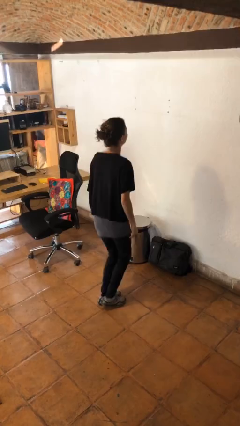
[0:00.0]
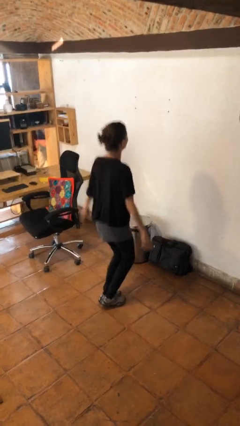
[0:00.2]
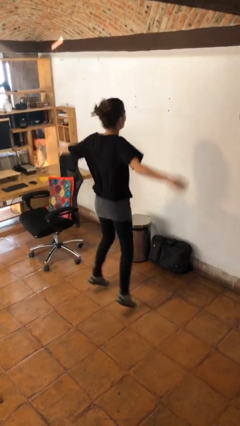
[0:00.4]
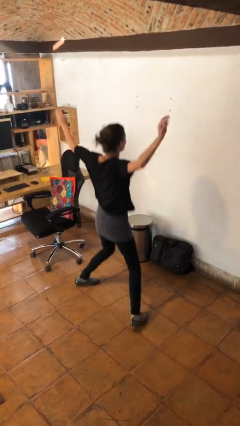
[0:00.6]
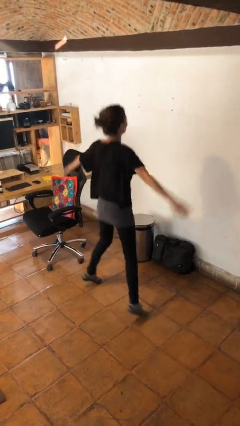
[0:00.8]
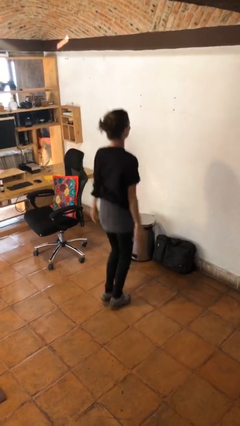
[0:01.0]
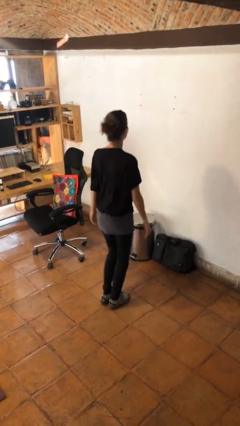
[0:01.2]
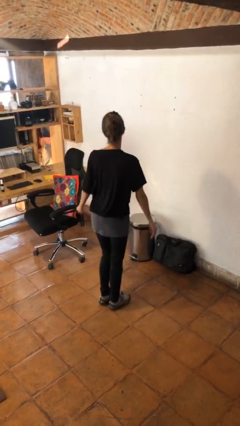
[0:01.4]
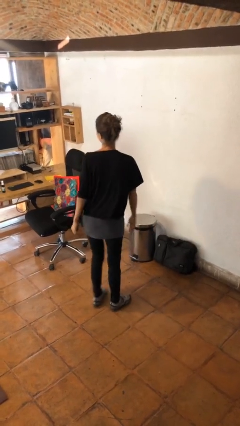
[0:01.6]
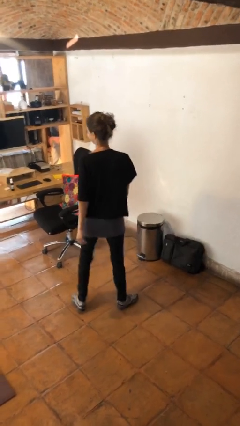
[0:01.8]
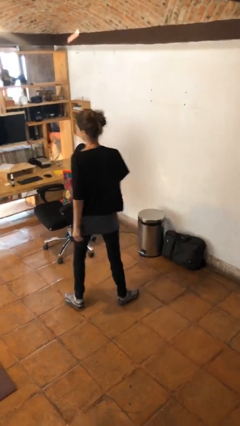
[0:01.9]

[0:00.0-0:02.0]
person exercises with jumping jacks

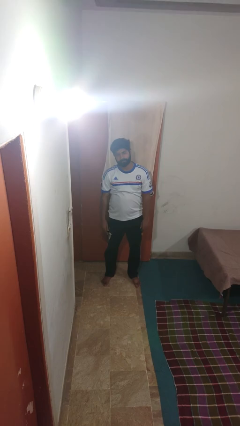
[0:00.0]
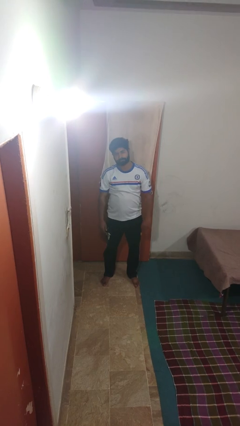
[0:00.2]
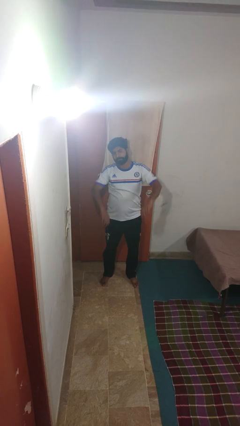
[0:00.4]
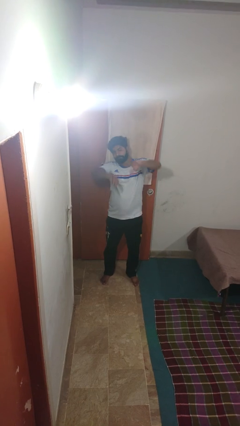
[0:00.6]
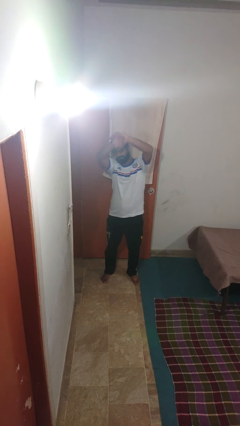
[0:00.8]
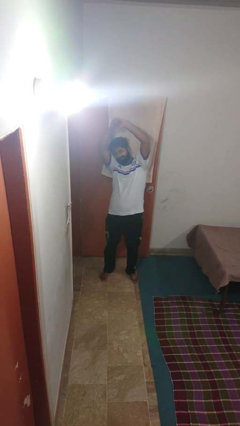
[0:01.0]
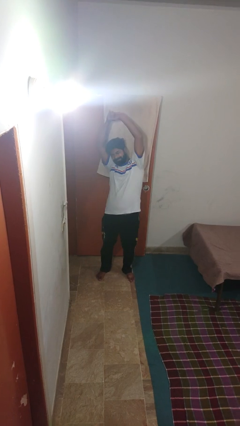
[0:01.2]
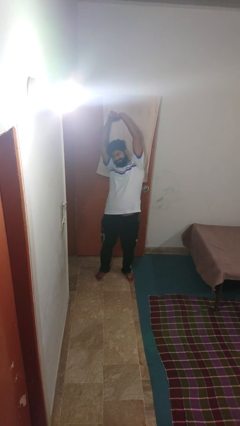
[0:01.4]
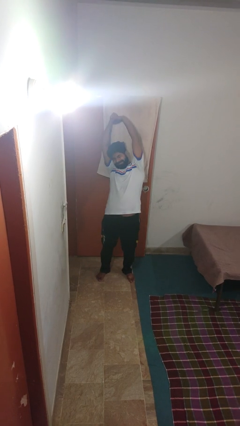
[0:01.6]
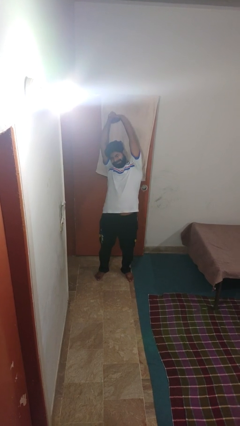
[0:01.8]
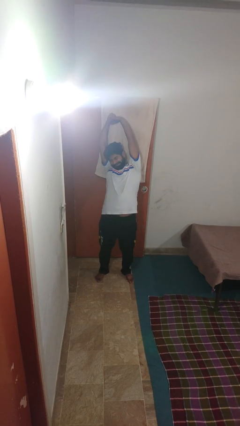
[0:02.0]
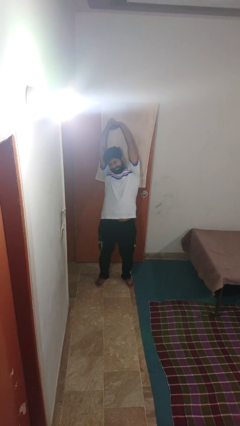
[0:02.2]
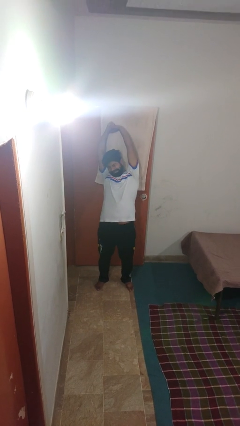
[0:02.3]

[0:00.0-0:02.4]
person stretches arms over head

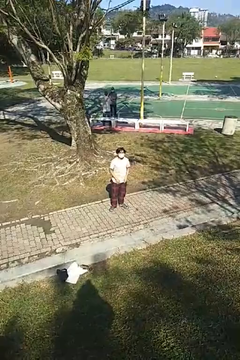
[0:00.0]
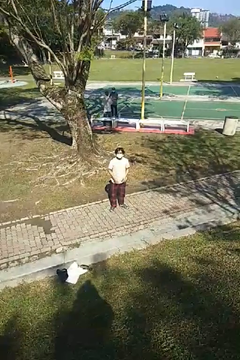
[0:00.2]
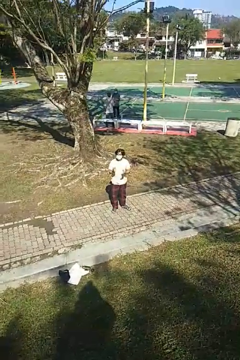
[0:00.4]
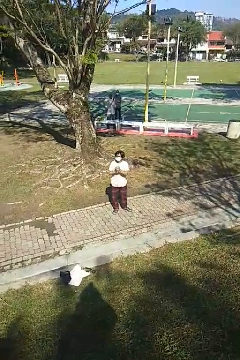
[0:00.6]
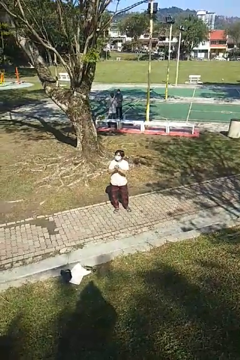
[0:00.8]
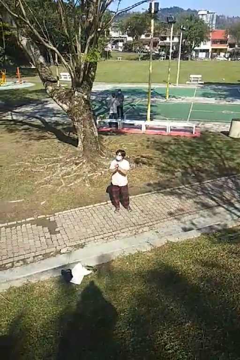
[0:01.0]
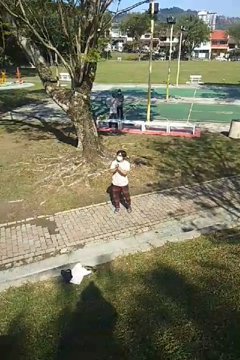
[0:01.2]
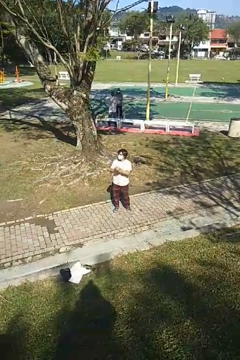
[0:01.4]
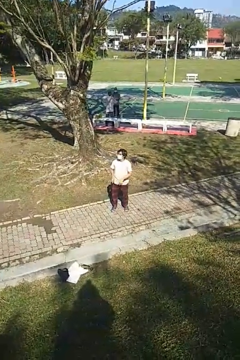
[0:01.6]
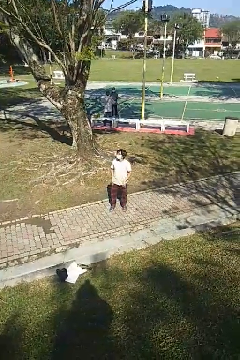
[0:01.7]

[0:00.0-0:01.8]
person claps hands

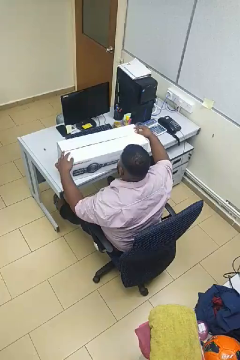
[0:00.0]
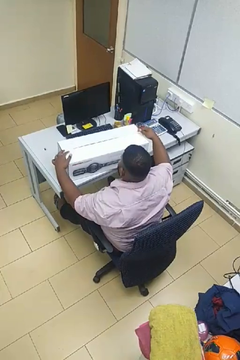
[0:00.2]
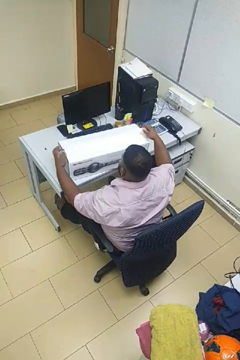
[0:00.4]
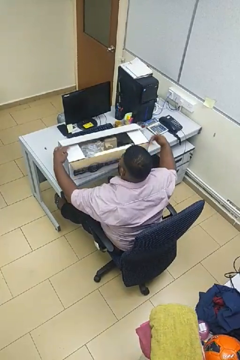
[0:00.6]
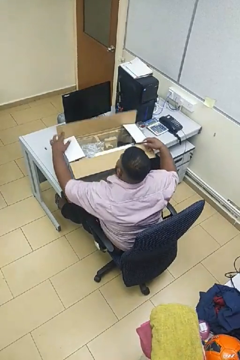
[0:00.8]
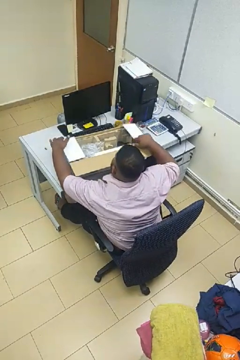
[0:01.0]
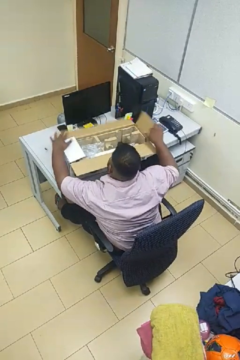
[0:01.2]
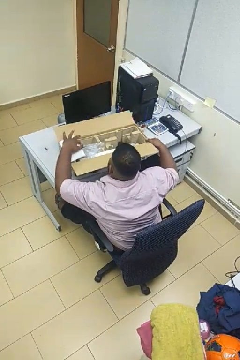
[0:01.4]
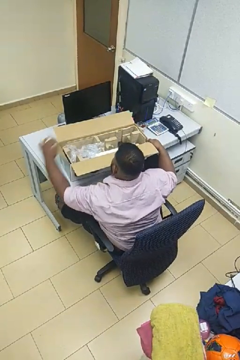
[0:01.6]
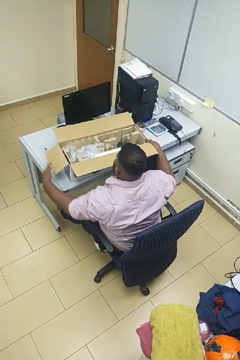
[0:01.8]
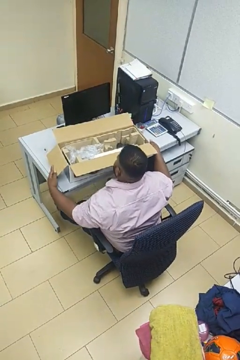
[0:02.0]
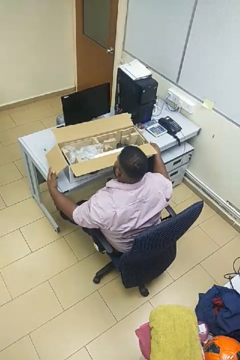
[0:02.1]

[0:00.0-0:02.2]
person opens box

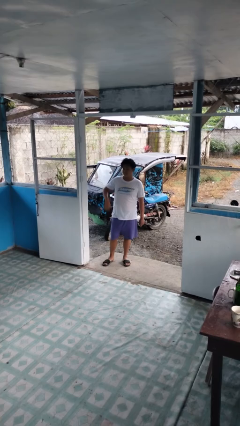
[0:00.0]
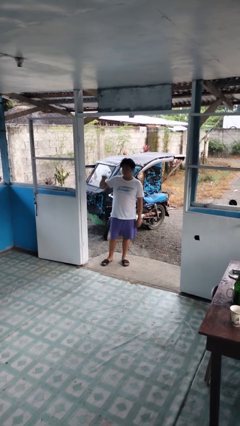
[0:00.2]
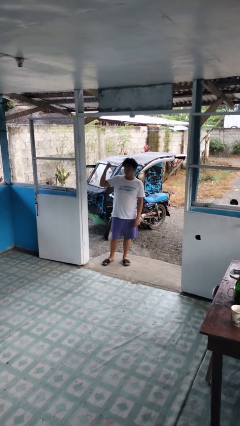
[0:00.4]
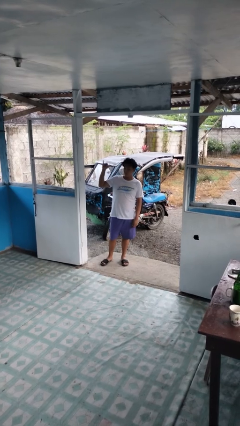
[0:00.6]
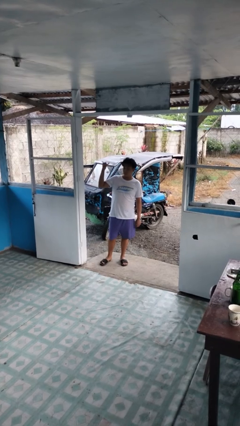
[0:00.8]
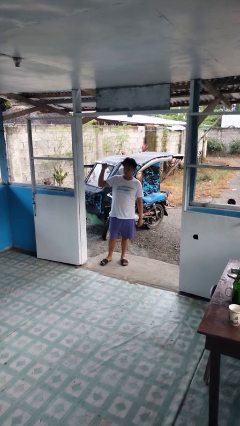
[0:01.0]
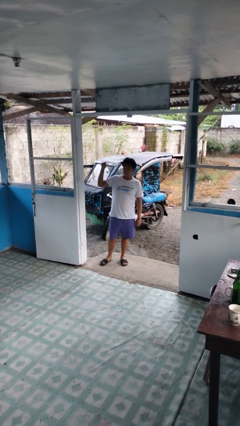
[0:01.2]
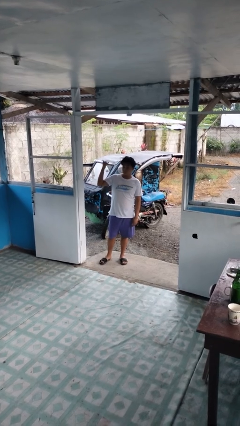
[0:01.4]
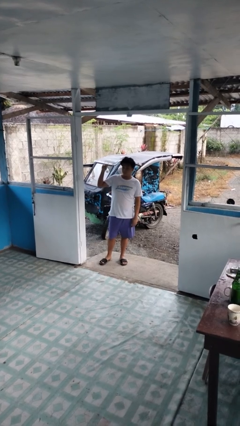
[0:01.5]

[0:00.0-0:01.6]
person gestures hang loose

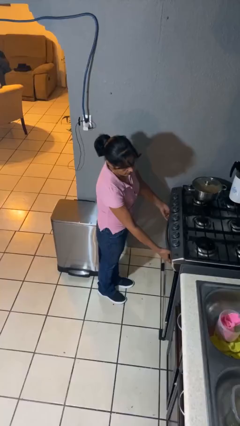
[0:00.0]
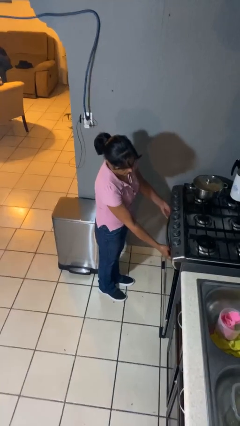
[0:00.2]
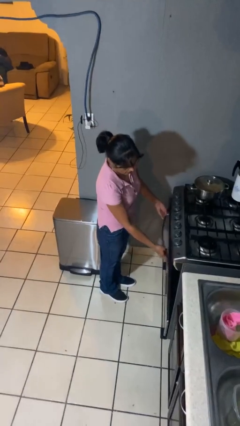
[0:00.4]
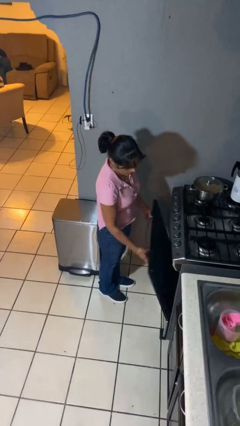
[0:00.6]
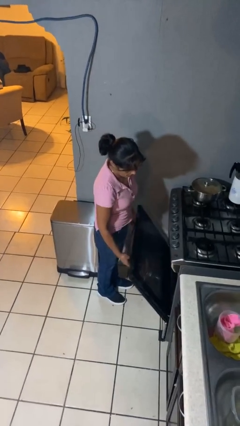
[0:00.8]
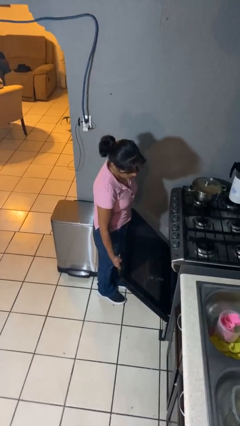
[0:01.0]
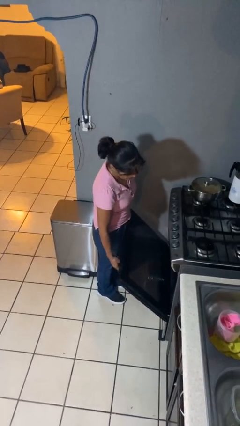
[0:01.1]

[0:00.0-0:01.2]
person opens oven door

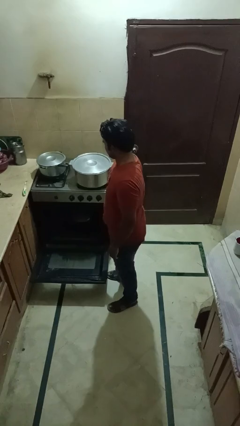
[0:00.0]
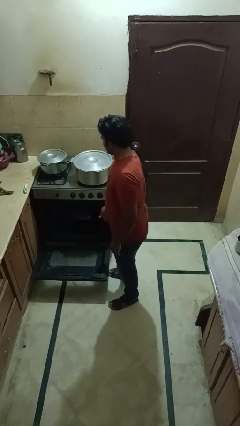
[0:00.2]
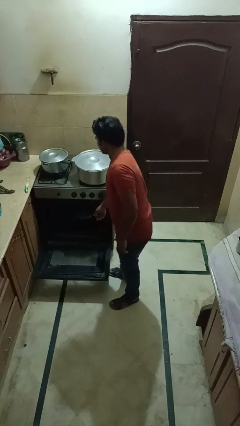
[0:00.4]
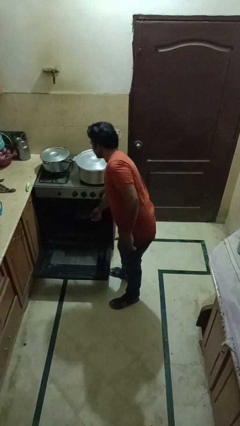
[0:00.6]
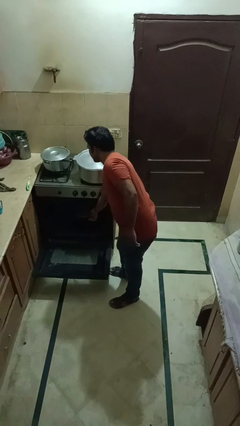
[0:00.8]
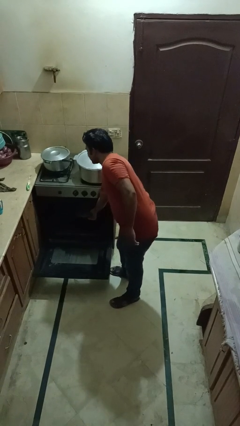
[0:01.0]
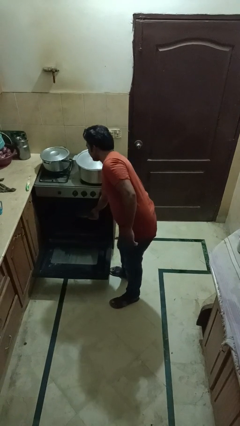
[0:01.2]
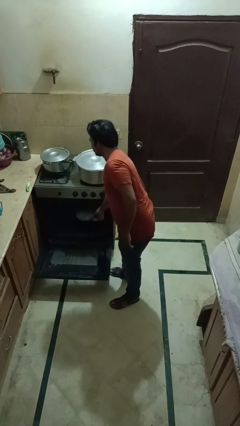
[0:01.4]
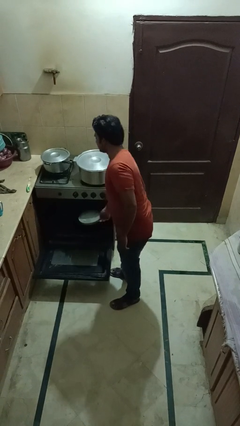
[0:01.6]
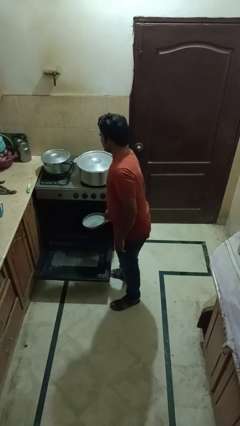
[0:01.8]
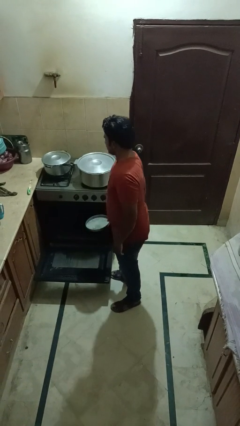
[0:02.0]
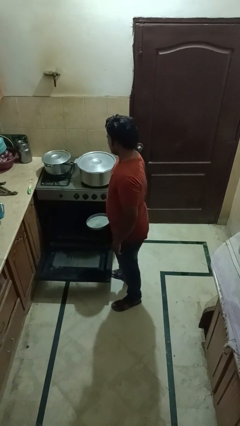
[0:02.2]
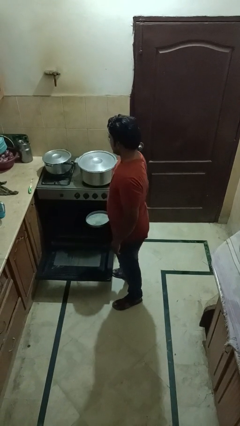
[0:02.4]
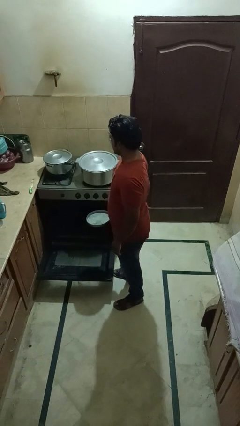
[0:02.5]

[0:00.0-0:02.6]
person takes object from oven

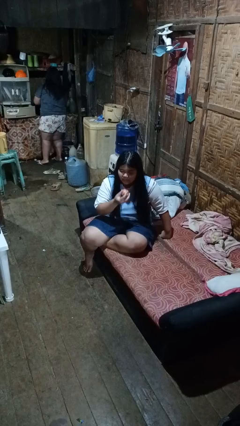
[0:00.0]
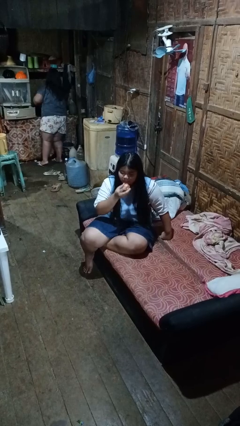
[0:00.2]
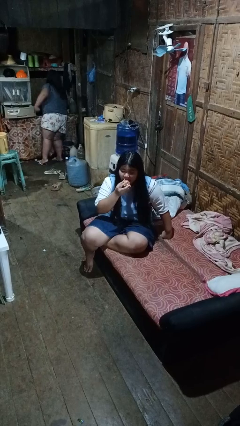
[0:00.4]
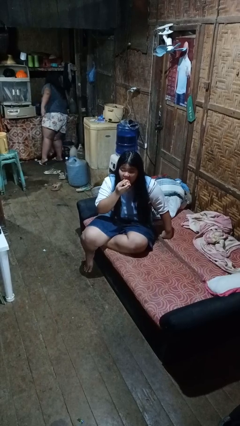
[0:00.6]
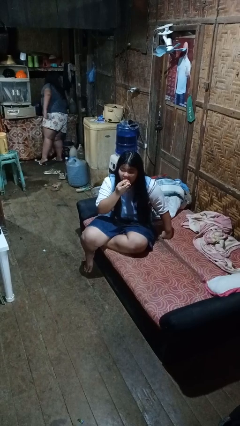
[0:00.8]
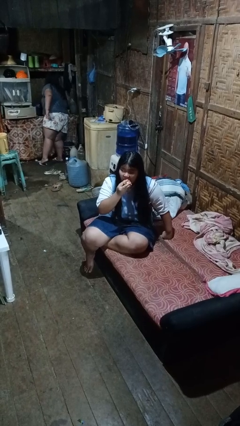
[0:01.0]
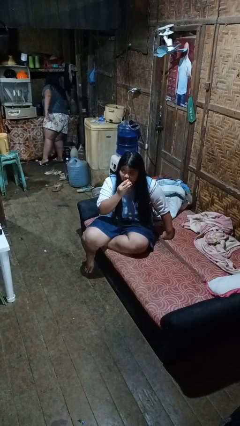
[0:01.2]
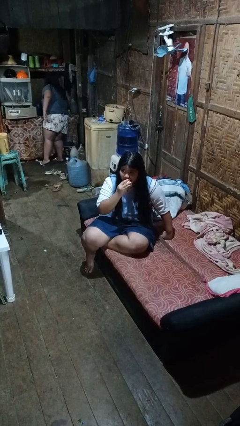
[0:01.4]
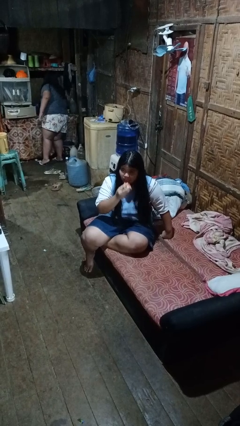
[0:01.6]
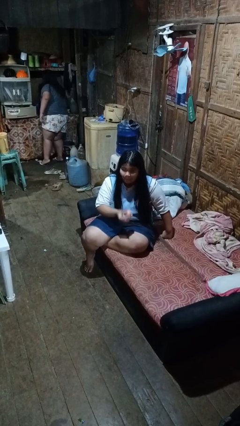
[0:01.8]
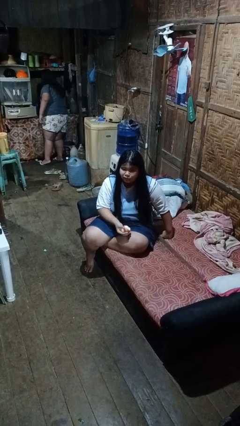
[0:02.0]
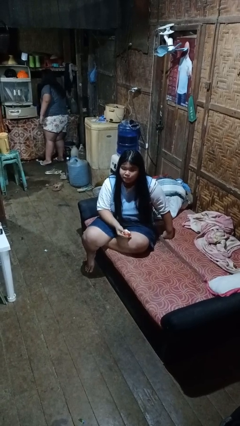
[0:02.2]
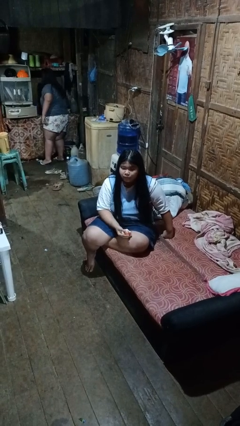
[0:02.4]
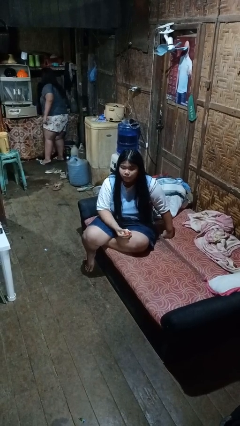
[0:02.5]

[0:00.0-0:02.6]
person eats apple

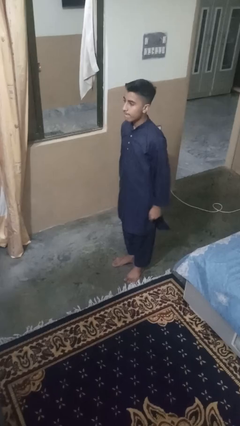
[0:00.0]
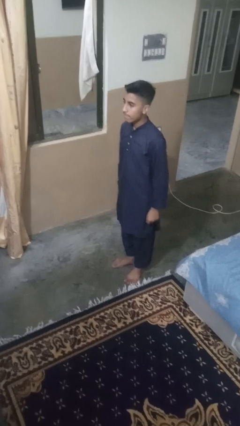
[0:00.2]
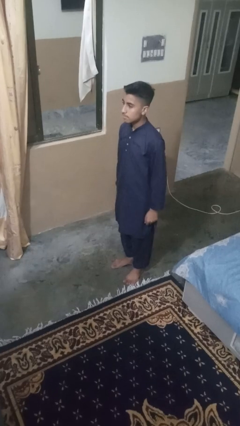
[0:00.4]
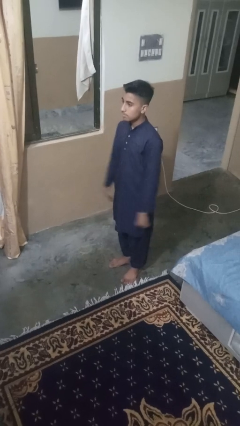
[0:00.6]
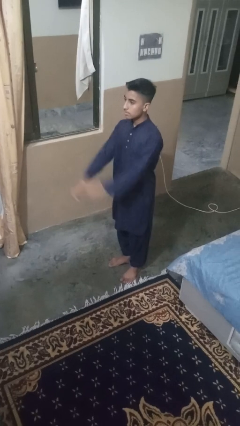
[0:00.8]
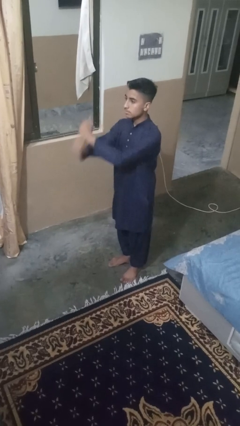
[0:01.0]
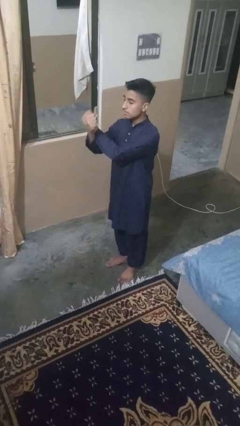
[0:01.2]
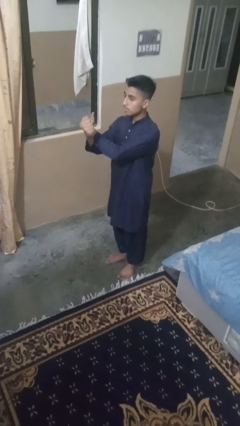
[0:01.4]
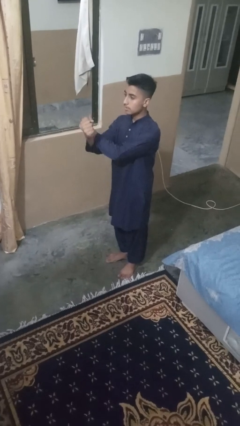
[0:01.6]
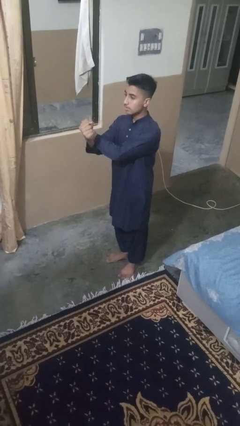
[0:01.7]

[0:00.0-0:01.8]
person crosses arms
